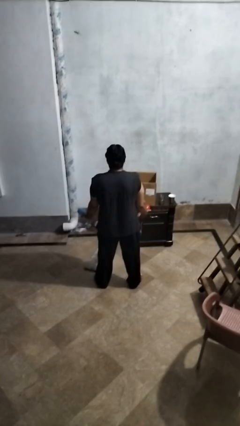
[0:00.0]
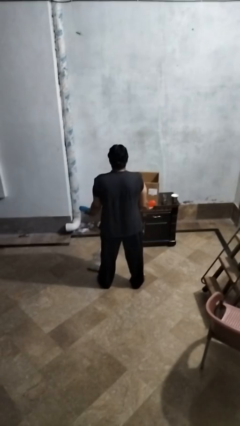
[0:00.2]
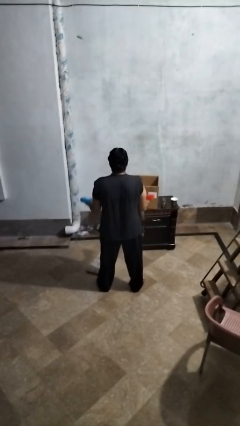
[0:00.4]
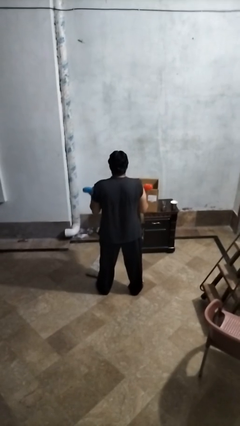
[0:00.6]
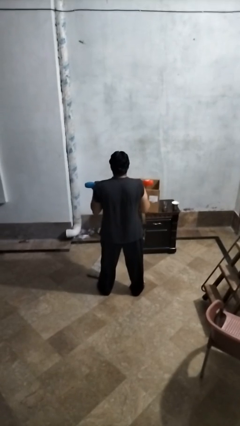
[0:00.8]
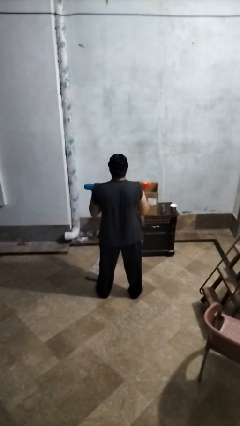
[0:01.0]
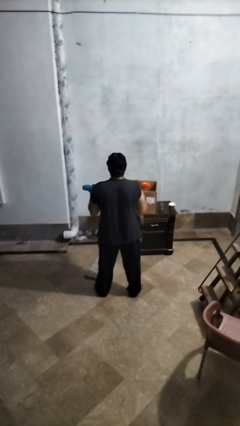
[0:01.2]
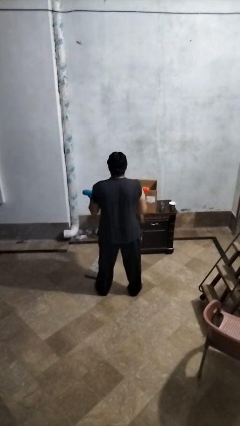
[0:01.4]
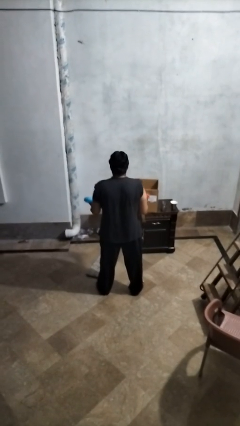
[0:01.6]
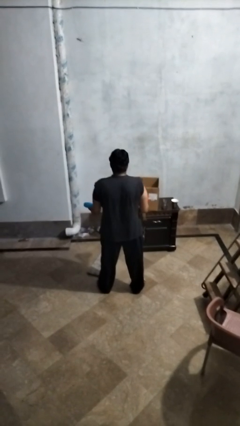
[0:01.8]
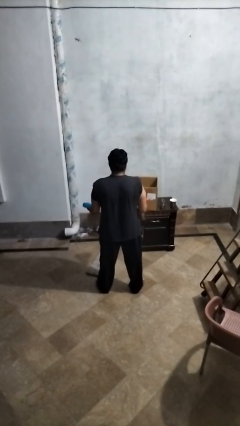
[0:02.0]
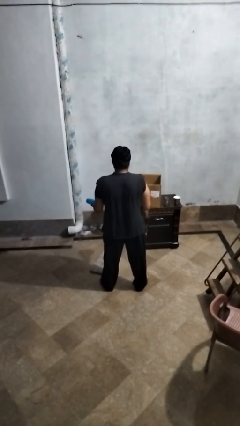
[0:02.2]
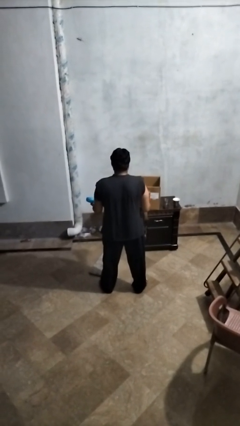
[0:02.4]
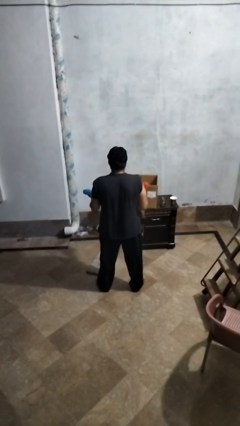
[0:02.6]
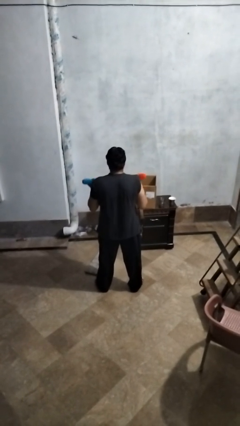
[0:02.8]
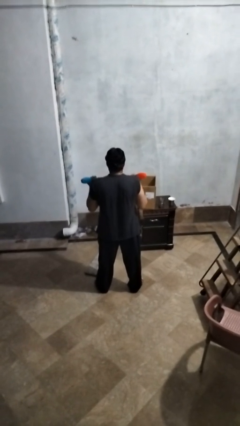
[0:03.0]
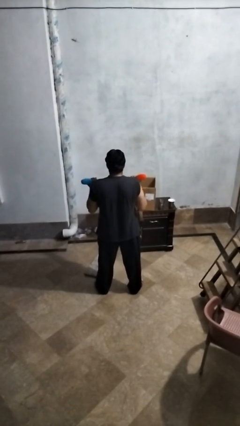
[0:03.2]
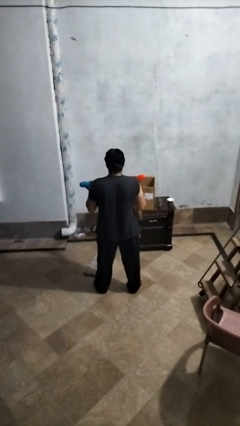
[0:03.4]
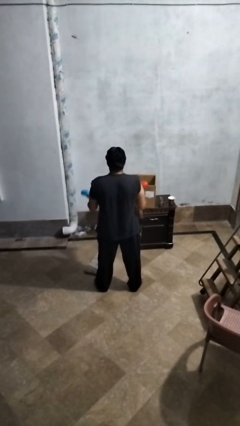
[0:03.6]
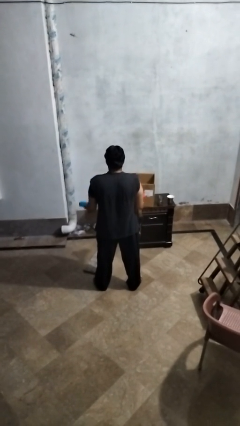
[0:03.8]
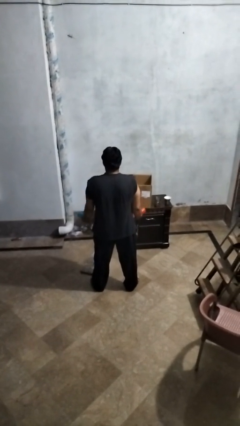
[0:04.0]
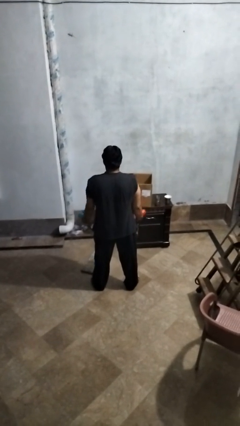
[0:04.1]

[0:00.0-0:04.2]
person lifts dumbbells

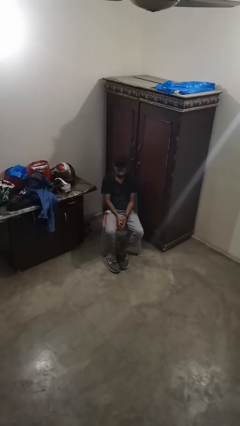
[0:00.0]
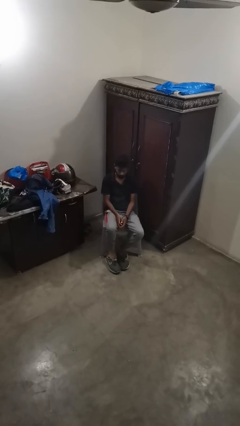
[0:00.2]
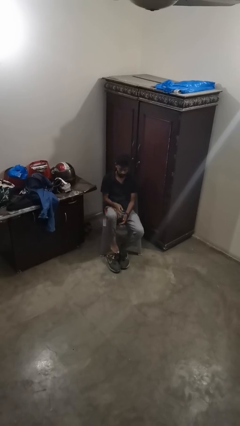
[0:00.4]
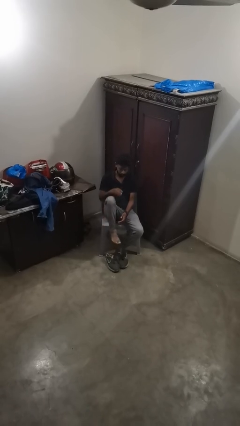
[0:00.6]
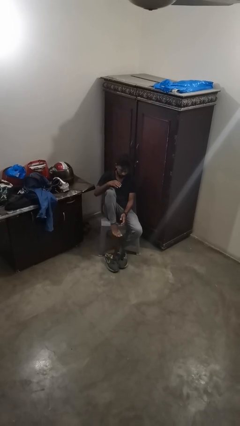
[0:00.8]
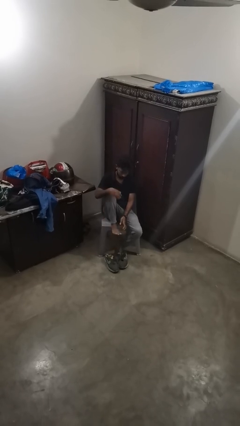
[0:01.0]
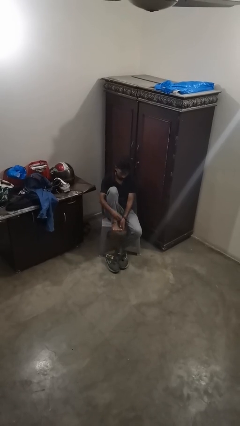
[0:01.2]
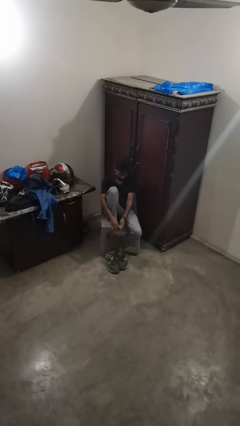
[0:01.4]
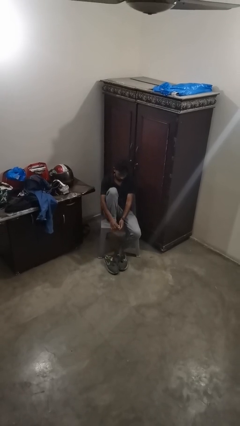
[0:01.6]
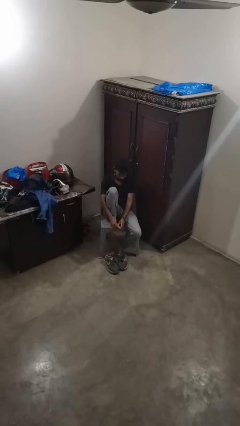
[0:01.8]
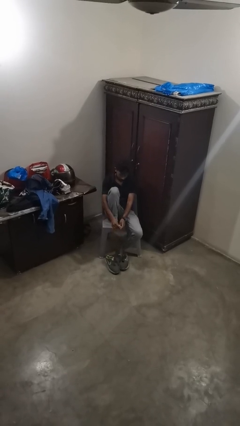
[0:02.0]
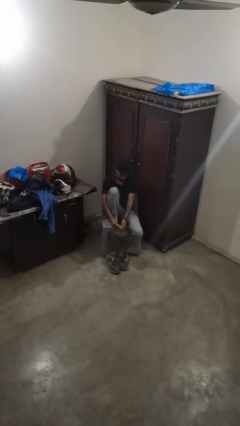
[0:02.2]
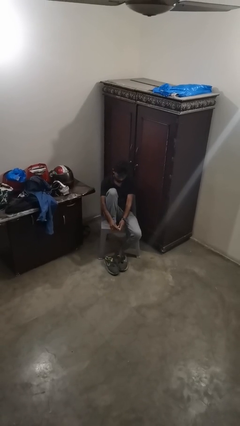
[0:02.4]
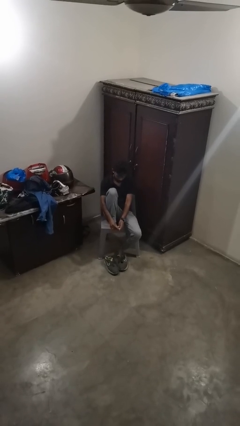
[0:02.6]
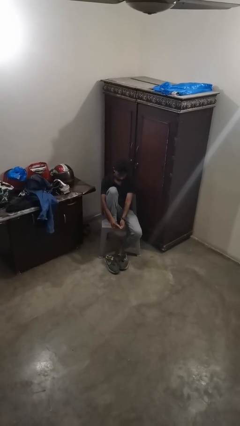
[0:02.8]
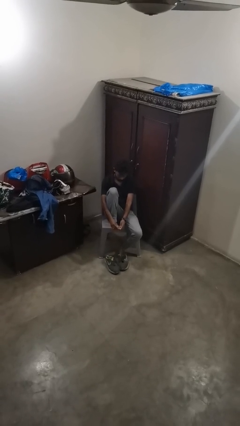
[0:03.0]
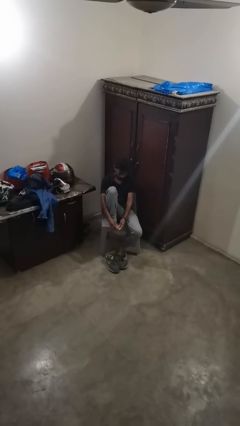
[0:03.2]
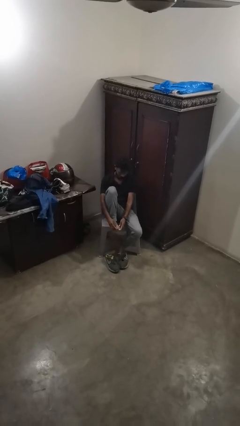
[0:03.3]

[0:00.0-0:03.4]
person rubs foot

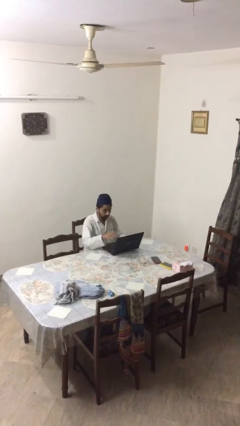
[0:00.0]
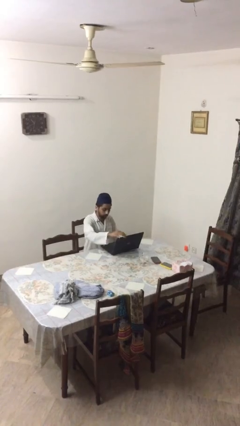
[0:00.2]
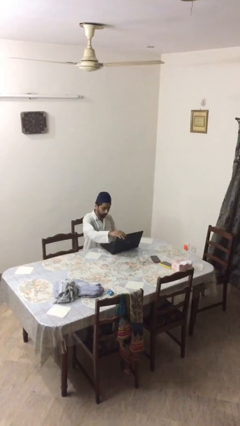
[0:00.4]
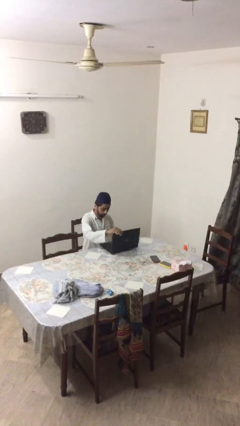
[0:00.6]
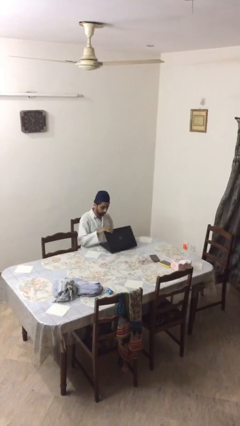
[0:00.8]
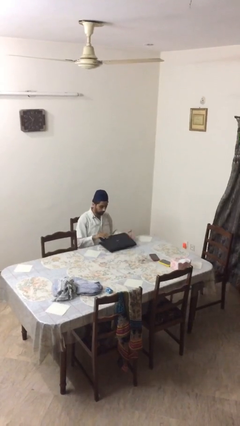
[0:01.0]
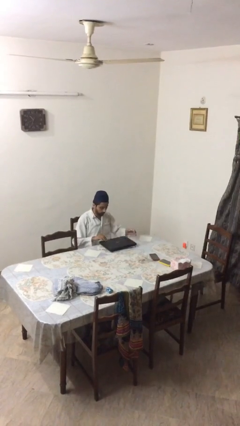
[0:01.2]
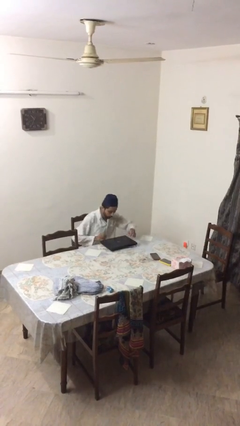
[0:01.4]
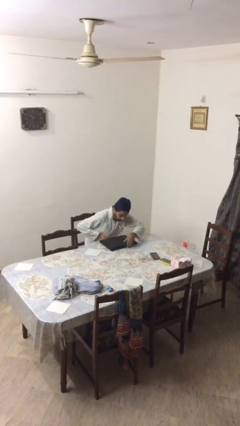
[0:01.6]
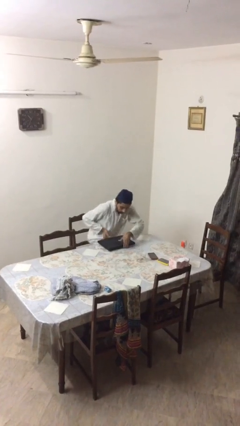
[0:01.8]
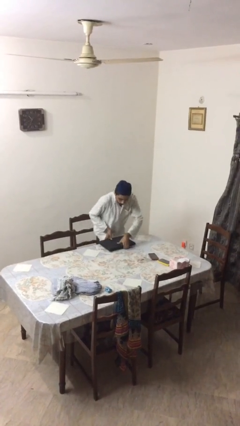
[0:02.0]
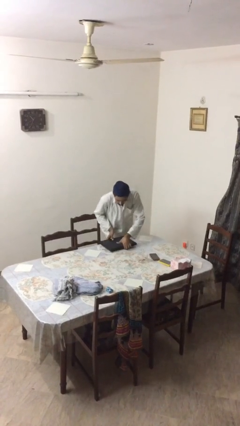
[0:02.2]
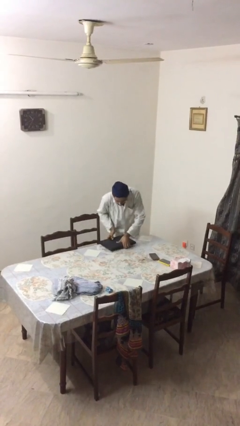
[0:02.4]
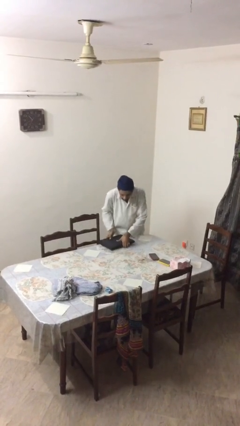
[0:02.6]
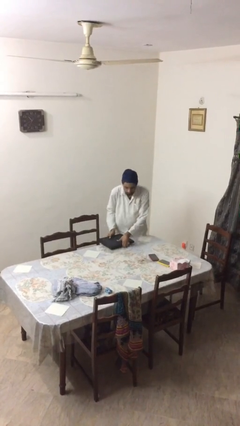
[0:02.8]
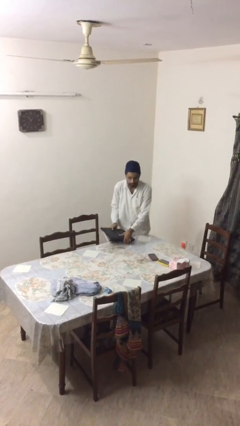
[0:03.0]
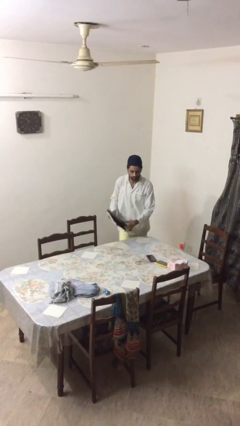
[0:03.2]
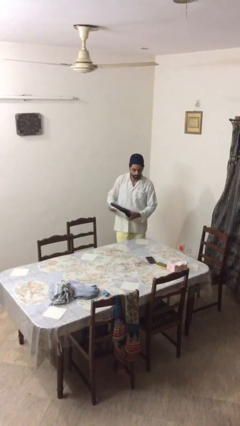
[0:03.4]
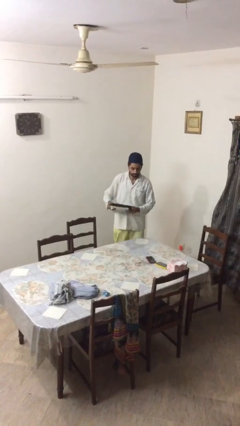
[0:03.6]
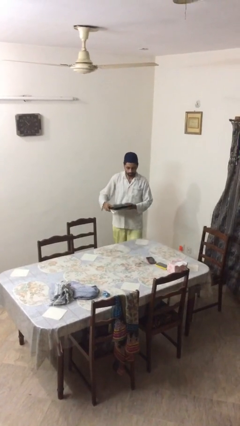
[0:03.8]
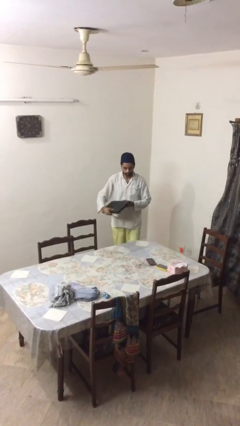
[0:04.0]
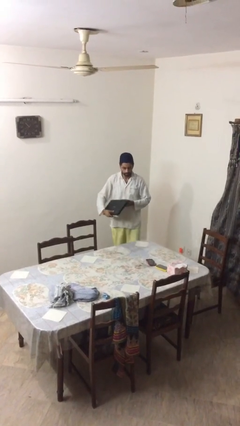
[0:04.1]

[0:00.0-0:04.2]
person stands up

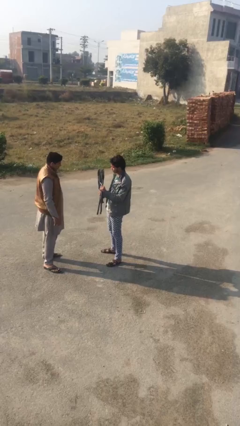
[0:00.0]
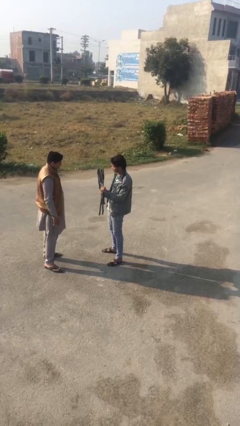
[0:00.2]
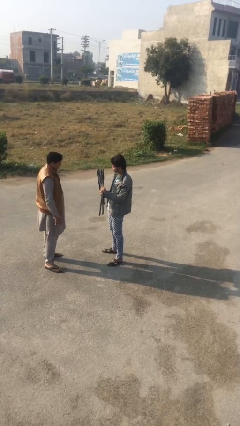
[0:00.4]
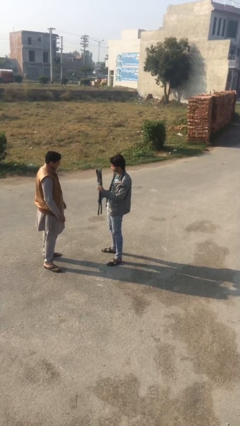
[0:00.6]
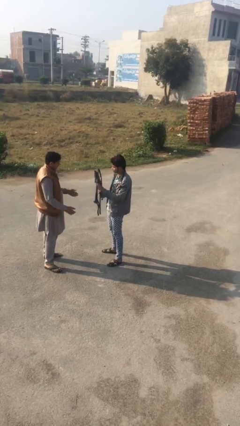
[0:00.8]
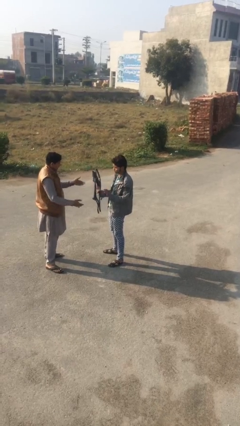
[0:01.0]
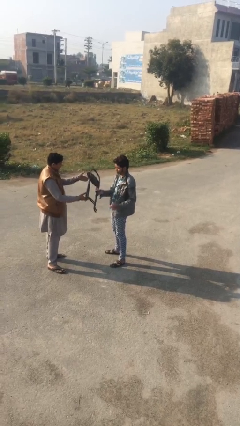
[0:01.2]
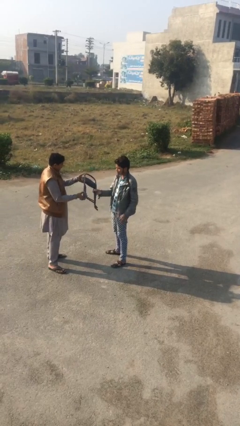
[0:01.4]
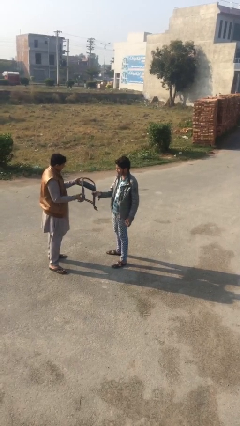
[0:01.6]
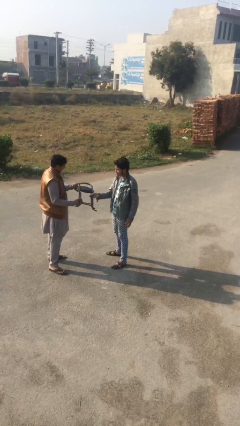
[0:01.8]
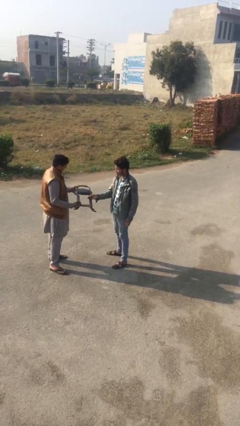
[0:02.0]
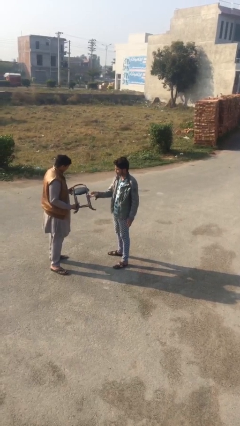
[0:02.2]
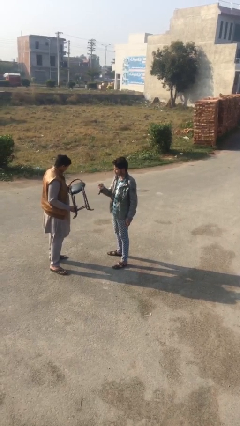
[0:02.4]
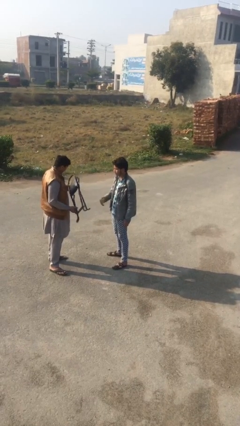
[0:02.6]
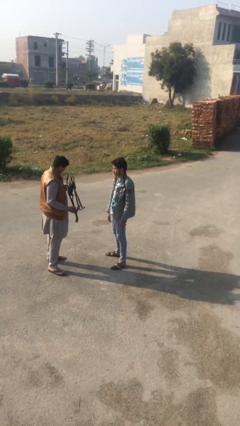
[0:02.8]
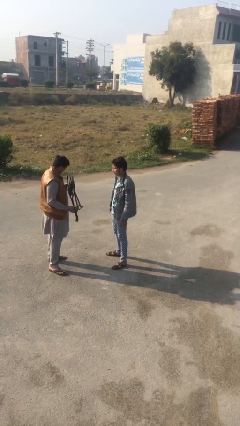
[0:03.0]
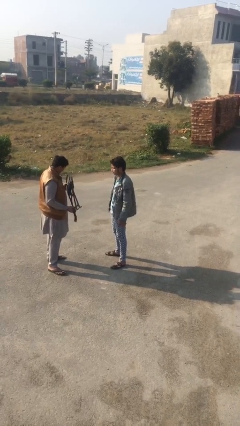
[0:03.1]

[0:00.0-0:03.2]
person transfers object to person

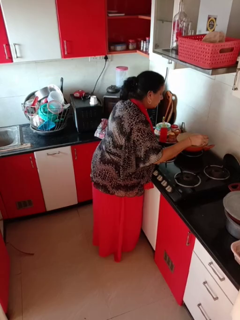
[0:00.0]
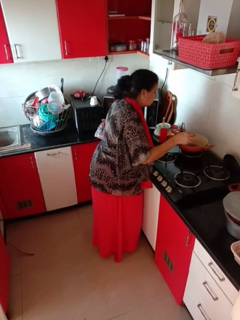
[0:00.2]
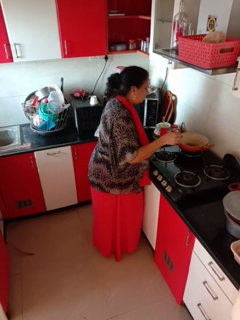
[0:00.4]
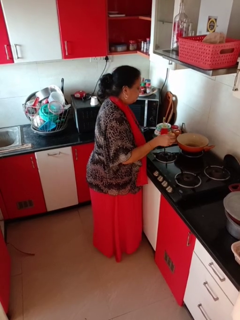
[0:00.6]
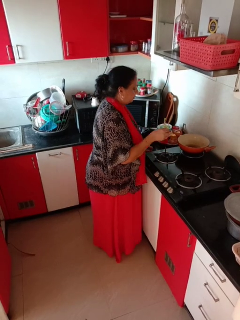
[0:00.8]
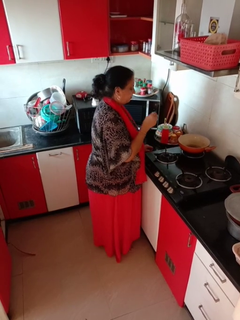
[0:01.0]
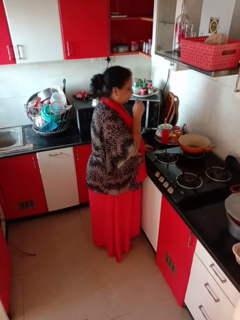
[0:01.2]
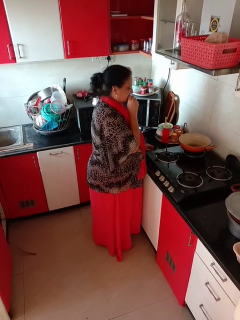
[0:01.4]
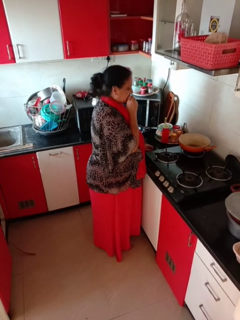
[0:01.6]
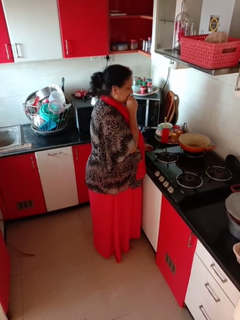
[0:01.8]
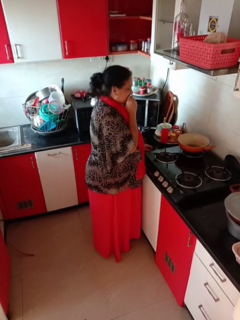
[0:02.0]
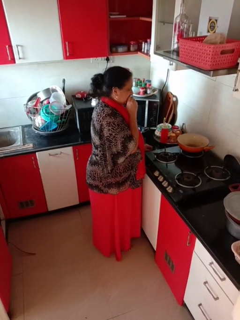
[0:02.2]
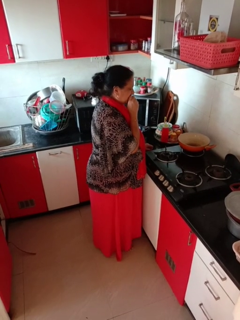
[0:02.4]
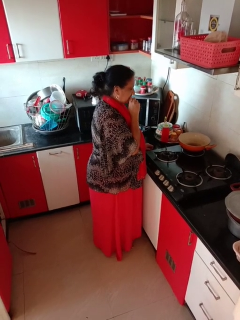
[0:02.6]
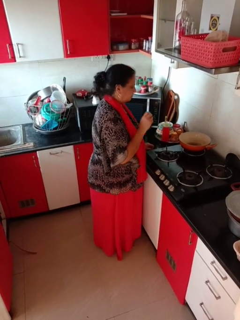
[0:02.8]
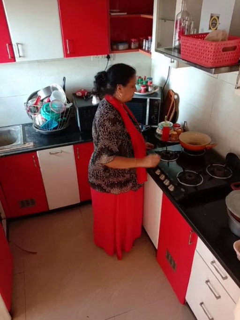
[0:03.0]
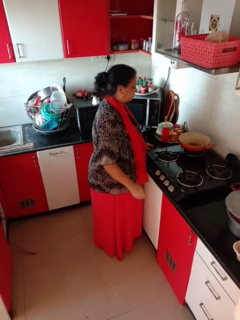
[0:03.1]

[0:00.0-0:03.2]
person burns hand
